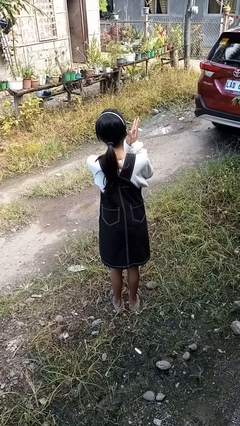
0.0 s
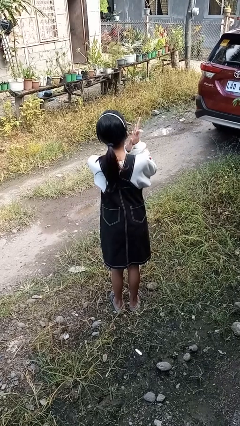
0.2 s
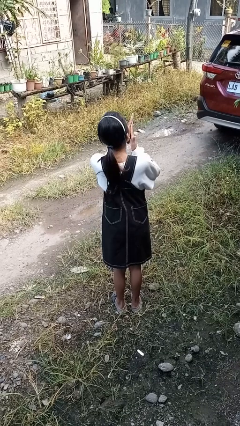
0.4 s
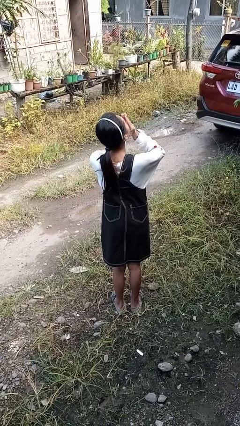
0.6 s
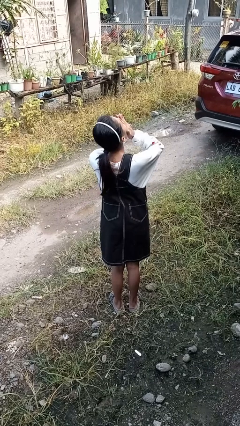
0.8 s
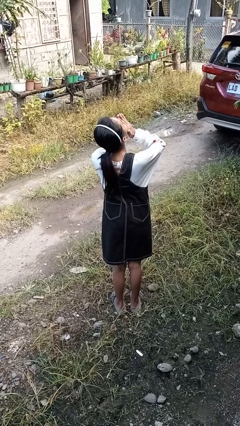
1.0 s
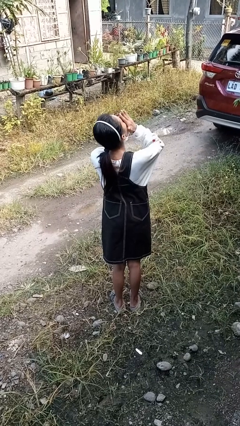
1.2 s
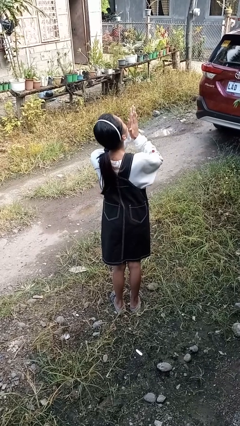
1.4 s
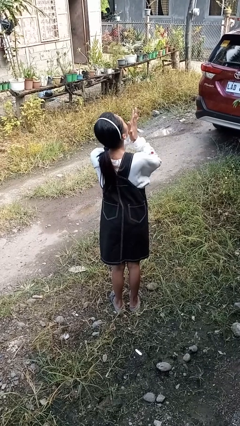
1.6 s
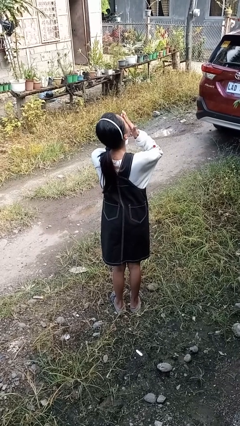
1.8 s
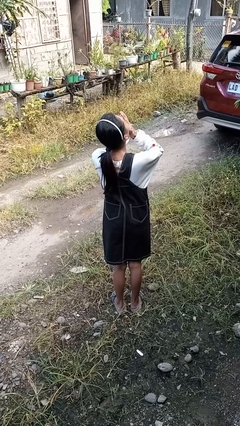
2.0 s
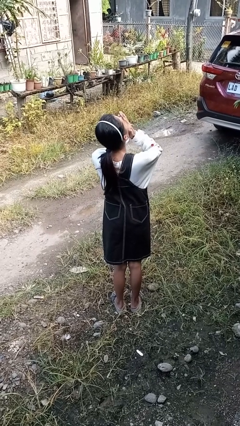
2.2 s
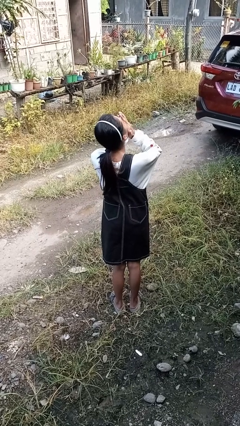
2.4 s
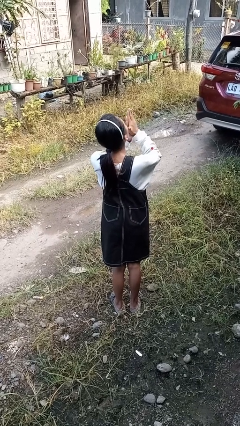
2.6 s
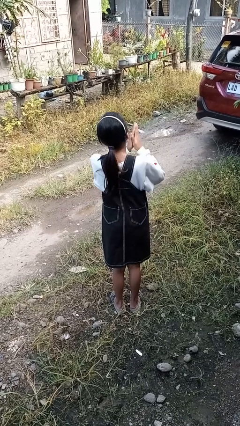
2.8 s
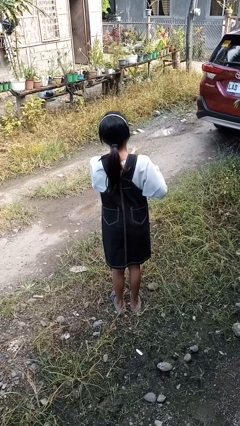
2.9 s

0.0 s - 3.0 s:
person blows into hands

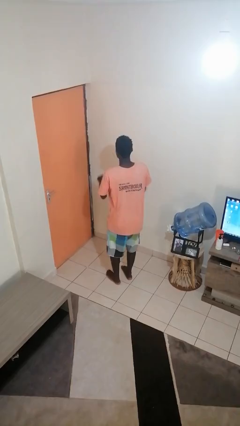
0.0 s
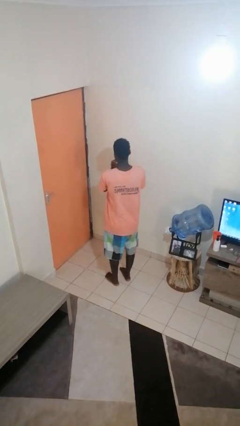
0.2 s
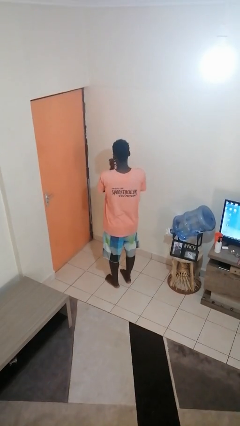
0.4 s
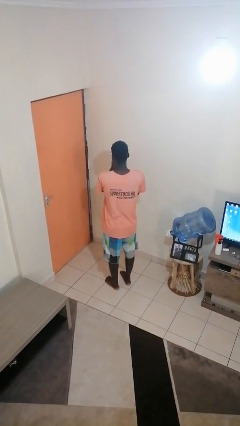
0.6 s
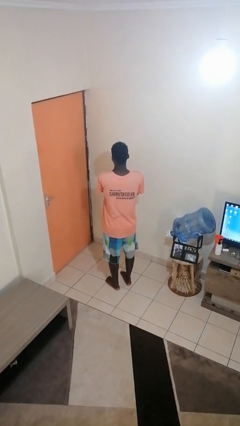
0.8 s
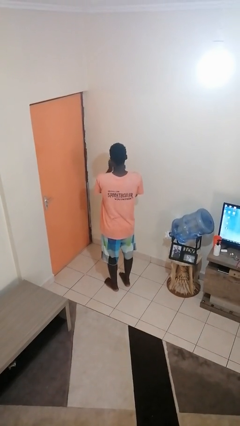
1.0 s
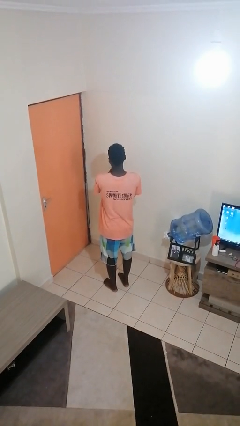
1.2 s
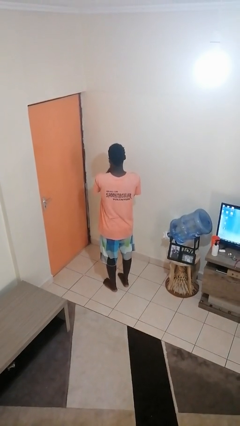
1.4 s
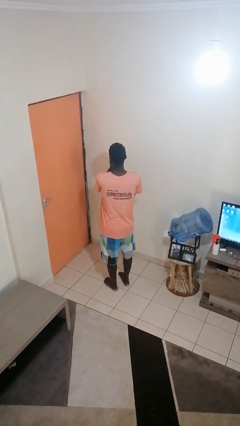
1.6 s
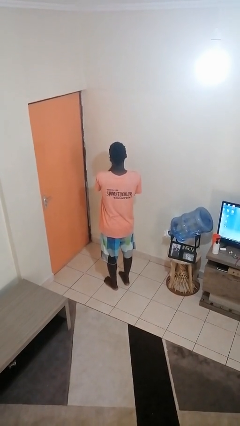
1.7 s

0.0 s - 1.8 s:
person claps hands

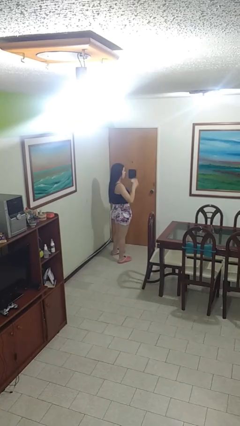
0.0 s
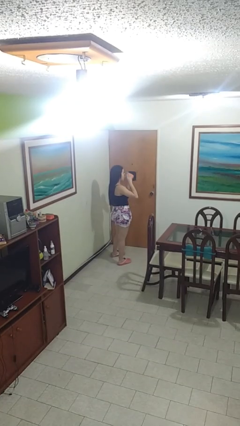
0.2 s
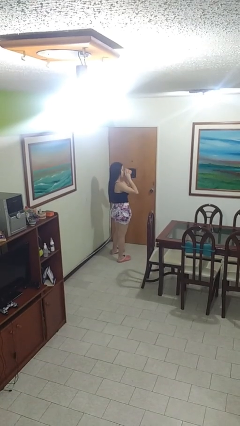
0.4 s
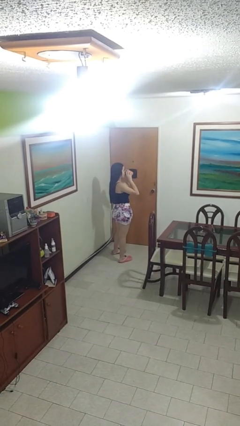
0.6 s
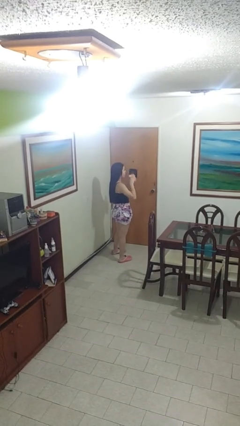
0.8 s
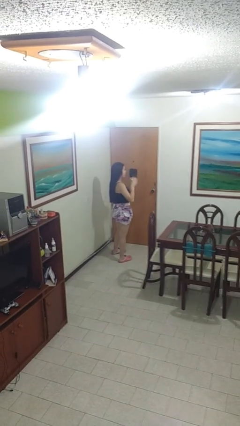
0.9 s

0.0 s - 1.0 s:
person drinks from mug

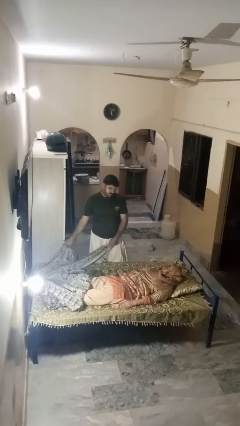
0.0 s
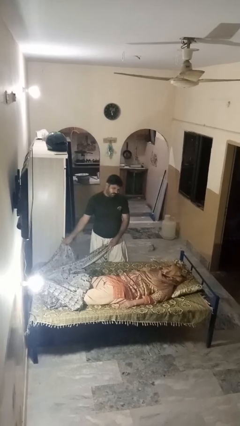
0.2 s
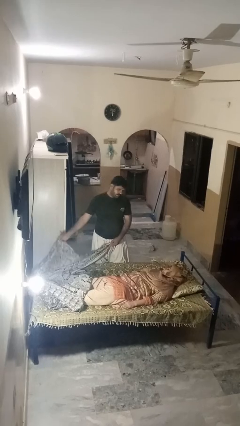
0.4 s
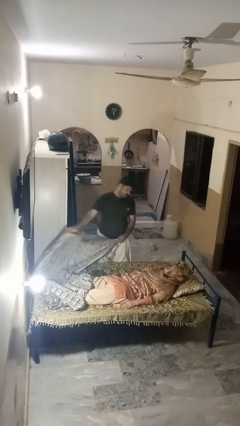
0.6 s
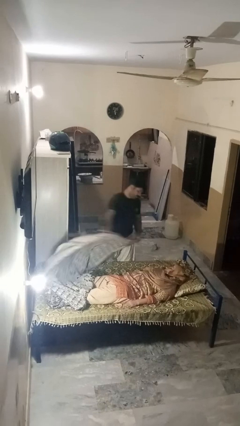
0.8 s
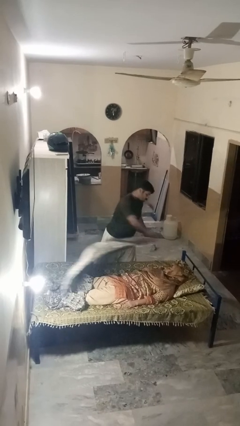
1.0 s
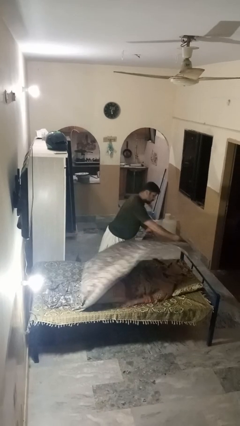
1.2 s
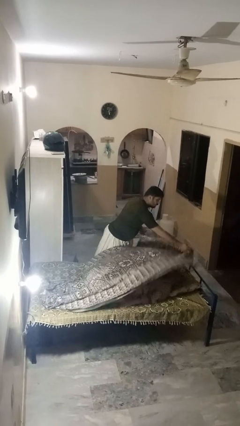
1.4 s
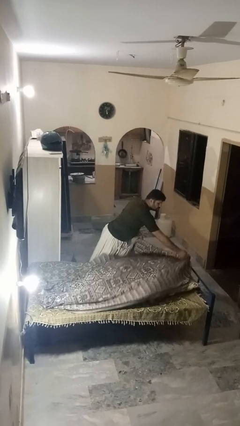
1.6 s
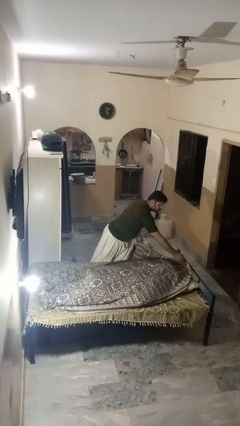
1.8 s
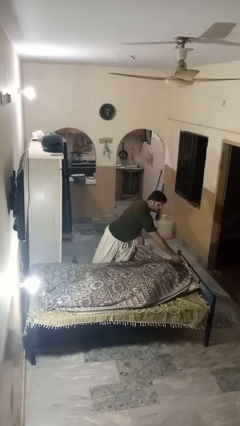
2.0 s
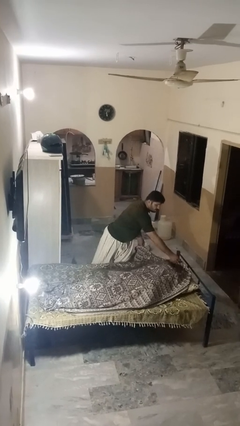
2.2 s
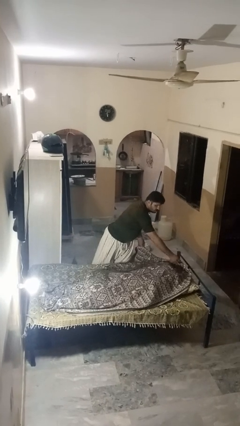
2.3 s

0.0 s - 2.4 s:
person covers friend with blanket

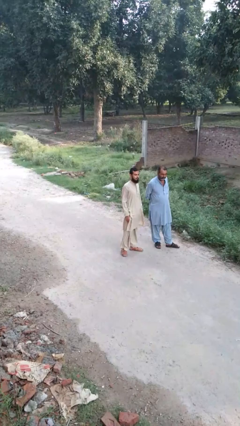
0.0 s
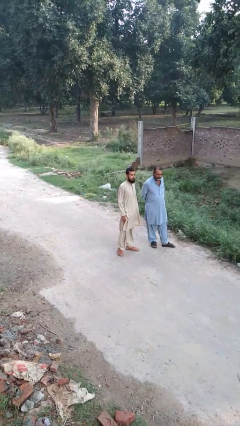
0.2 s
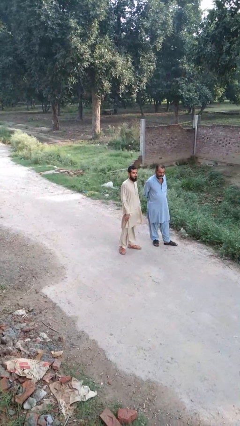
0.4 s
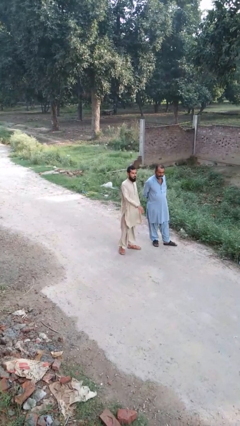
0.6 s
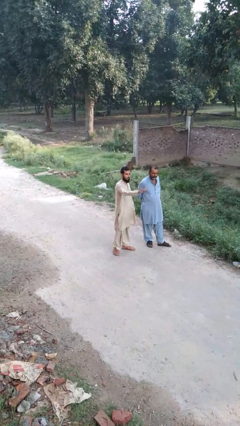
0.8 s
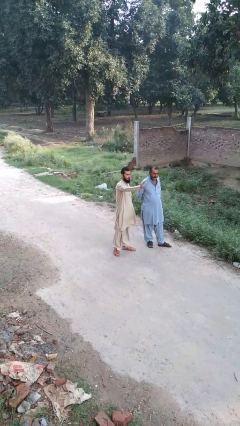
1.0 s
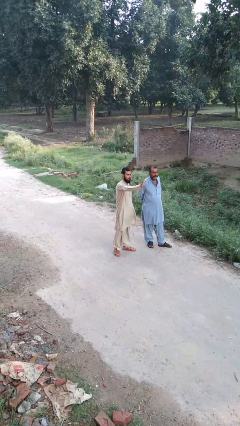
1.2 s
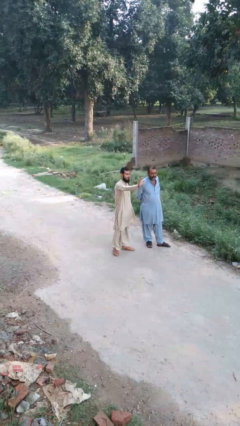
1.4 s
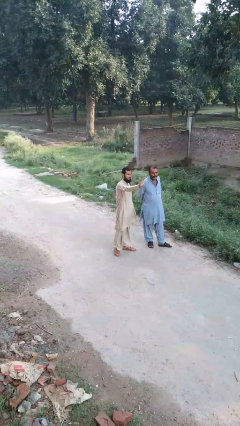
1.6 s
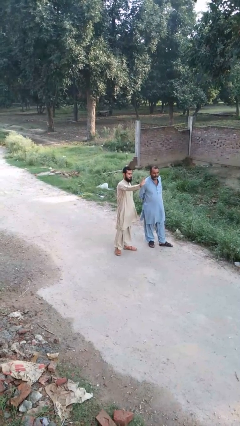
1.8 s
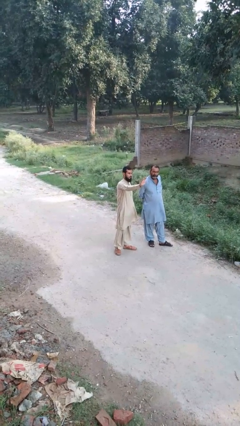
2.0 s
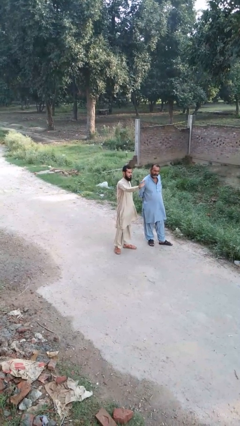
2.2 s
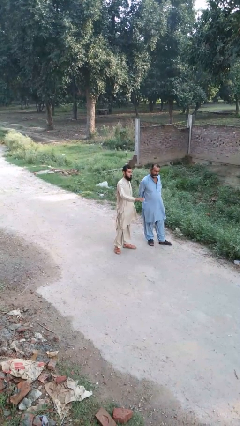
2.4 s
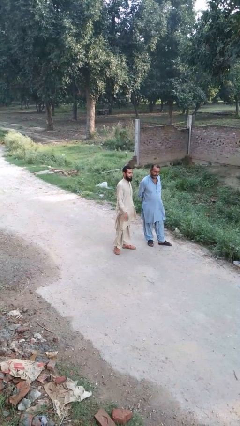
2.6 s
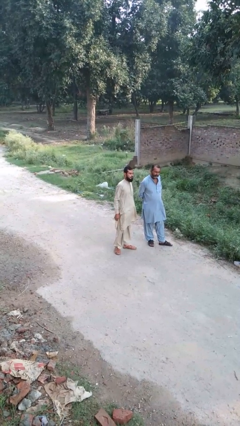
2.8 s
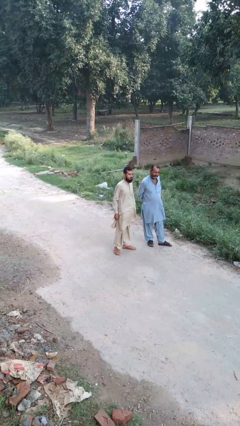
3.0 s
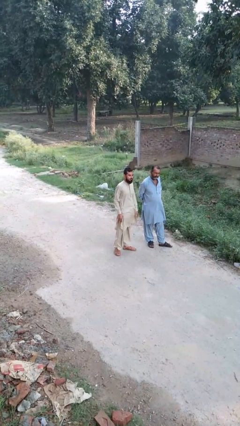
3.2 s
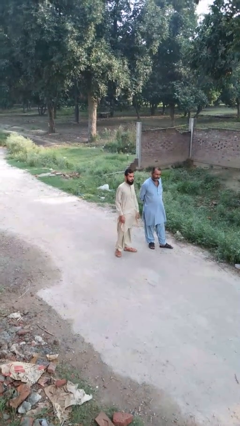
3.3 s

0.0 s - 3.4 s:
person waves at person

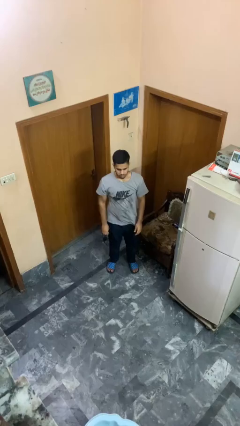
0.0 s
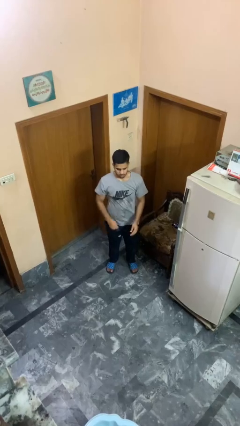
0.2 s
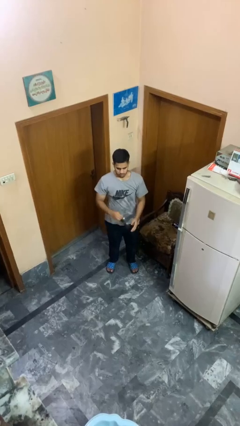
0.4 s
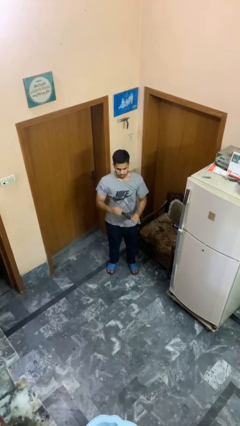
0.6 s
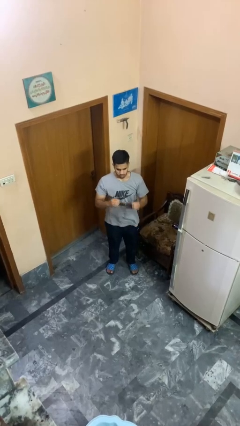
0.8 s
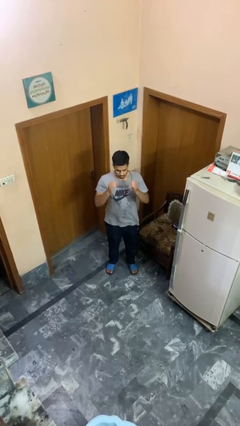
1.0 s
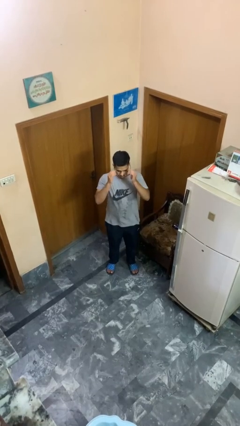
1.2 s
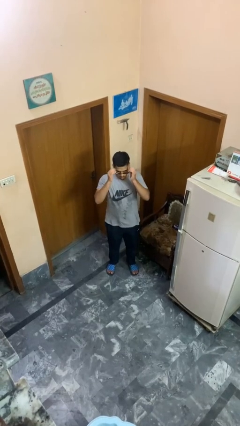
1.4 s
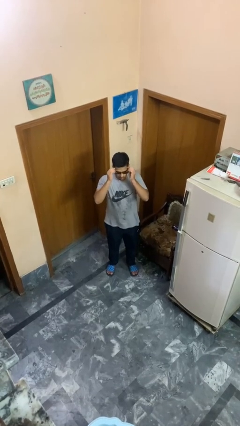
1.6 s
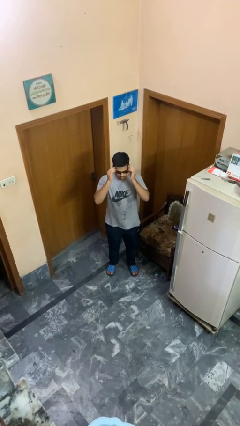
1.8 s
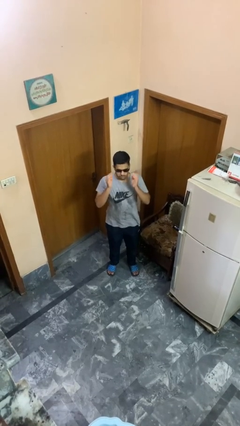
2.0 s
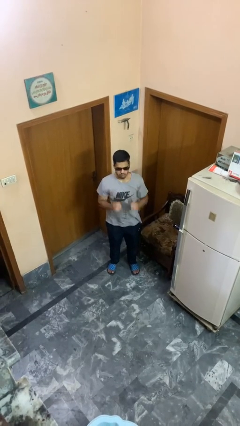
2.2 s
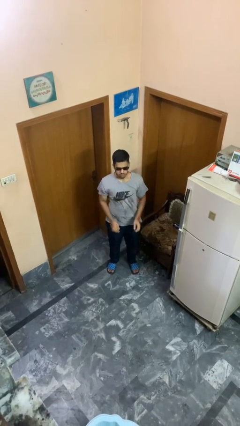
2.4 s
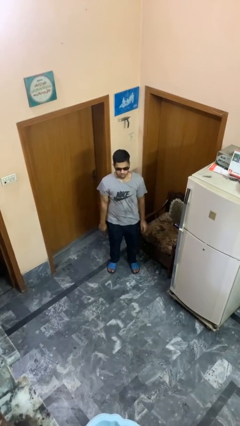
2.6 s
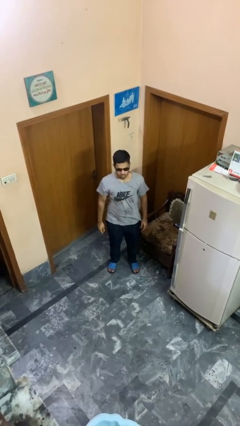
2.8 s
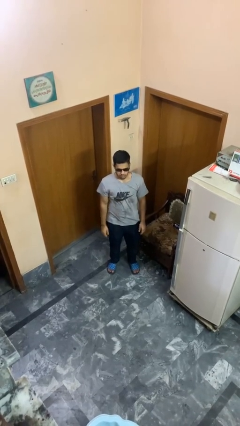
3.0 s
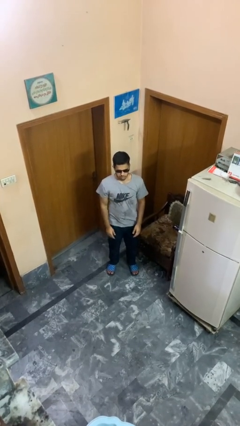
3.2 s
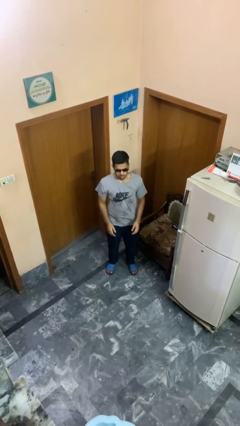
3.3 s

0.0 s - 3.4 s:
person puts on sunglasses

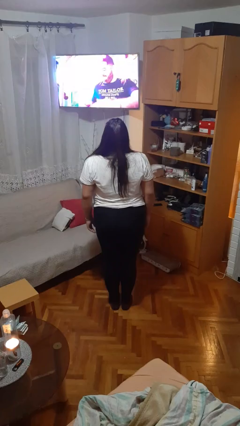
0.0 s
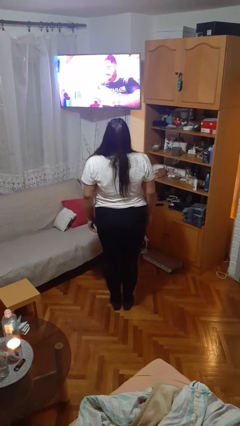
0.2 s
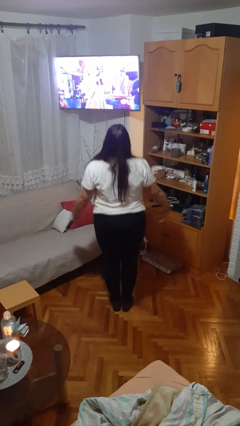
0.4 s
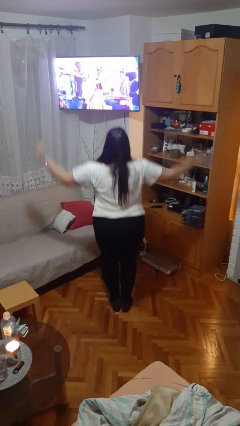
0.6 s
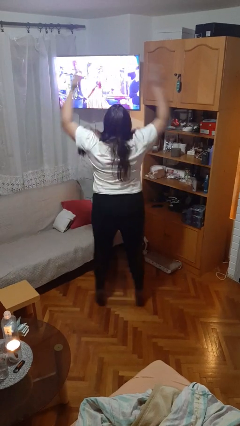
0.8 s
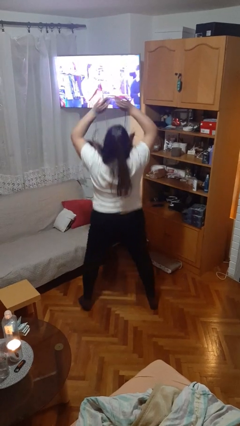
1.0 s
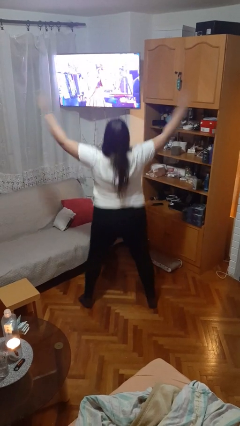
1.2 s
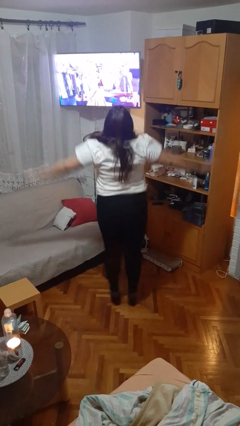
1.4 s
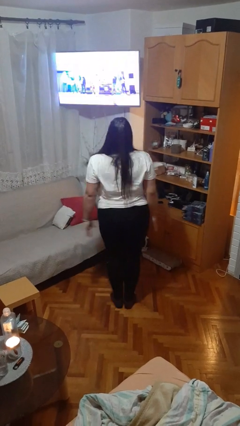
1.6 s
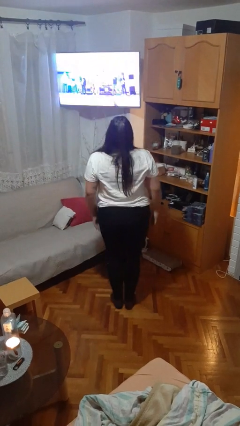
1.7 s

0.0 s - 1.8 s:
person exercises with jumping jacks
